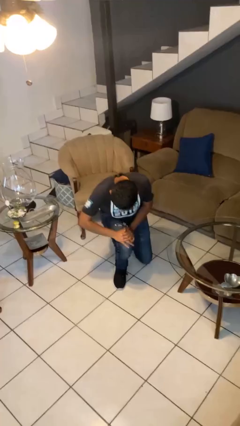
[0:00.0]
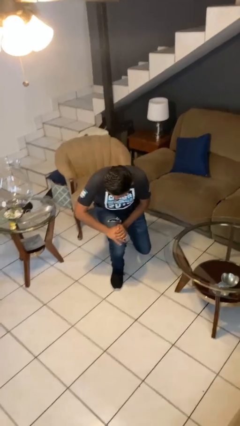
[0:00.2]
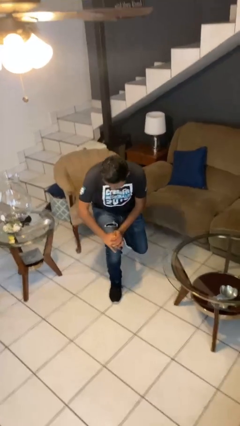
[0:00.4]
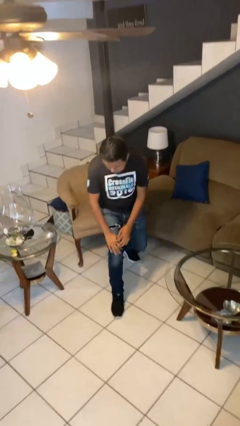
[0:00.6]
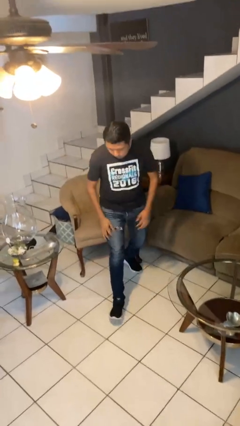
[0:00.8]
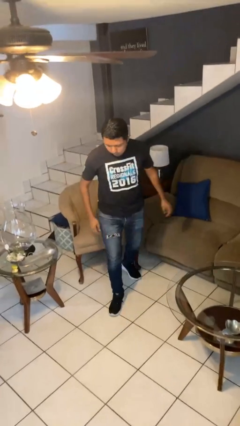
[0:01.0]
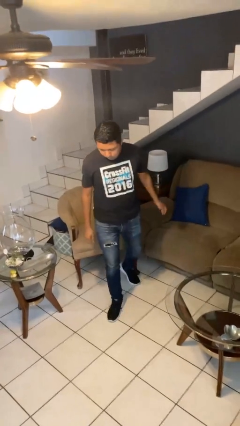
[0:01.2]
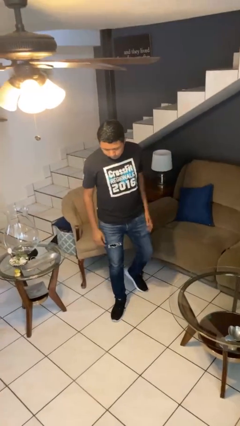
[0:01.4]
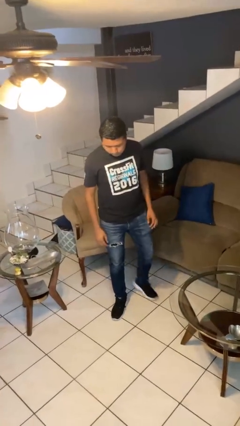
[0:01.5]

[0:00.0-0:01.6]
person stands up from floor

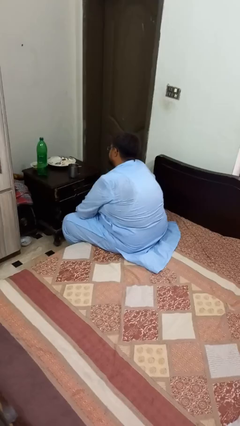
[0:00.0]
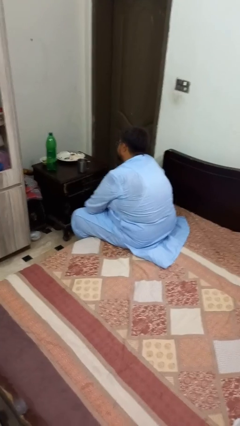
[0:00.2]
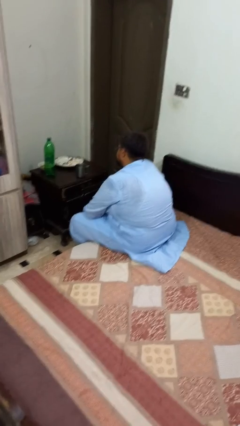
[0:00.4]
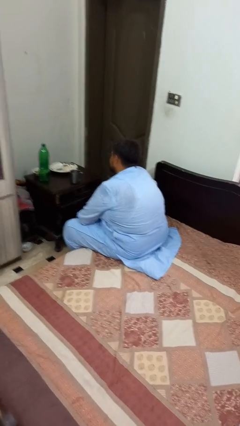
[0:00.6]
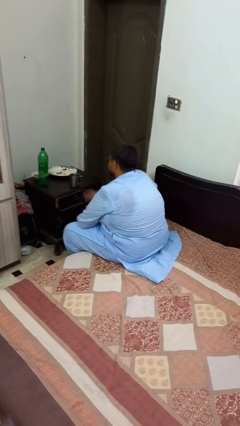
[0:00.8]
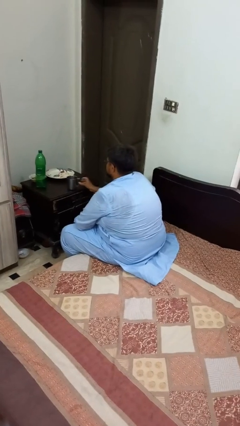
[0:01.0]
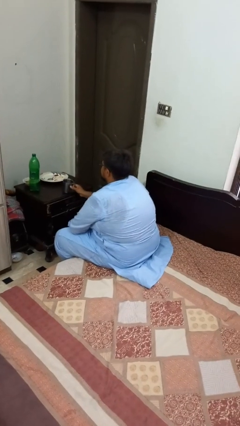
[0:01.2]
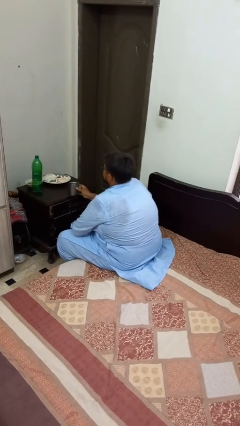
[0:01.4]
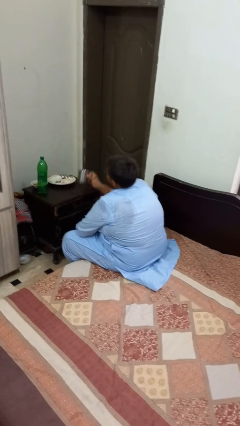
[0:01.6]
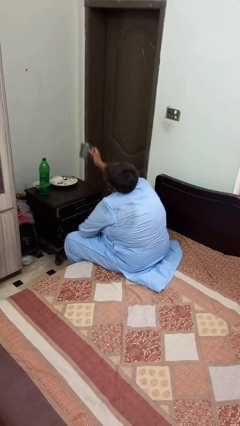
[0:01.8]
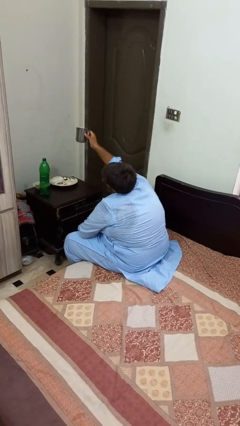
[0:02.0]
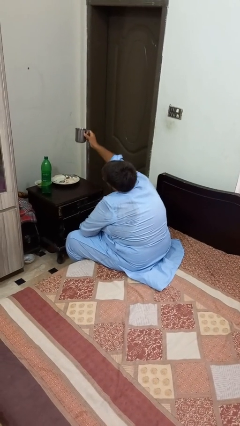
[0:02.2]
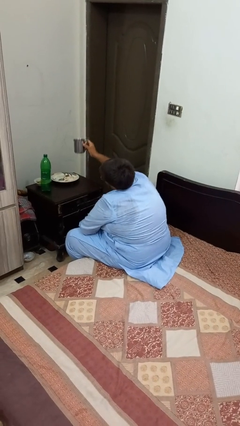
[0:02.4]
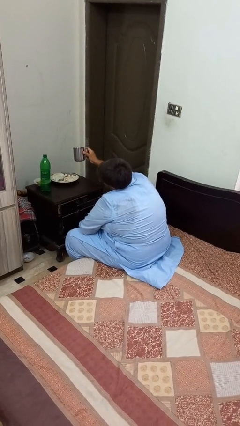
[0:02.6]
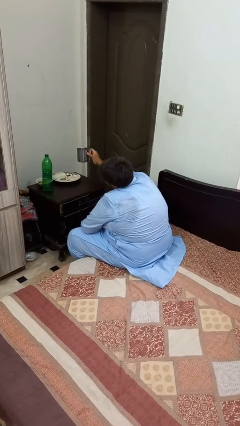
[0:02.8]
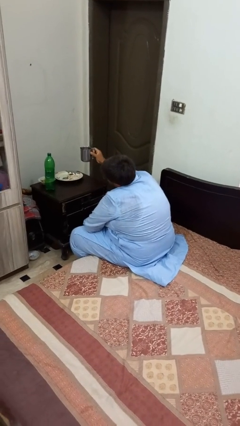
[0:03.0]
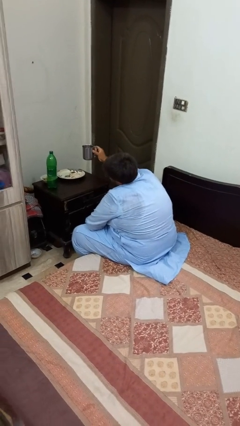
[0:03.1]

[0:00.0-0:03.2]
person picks up object from table

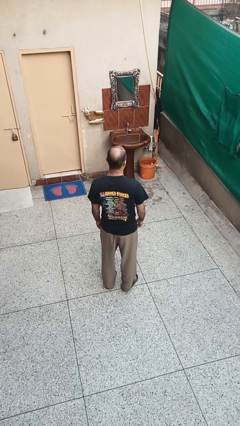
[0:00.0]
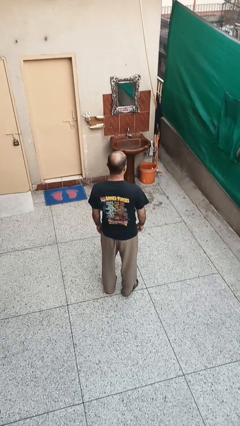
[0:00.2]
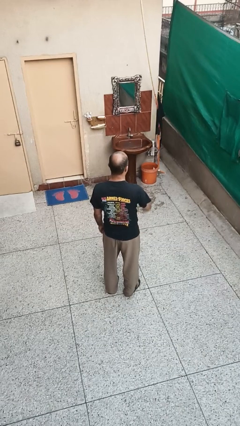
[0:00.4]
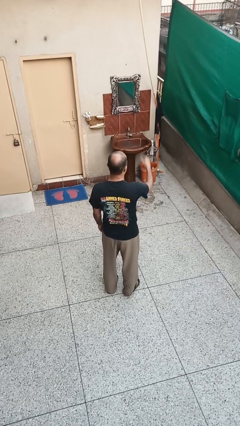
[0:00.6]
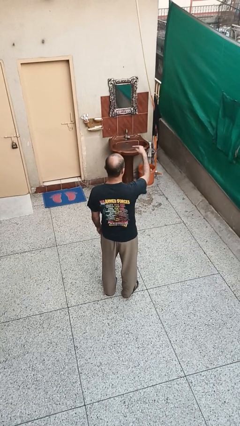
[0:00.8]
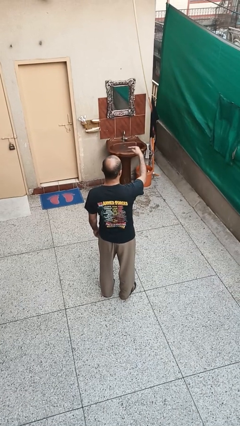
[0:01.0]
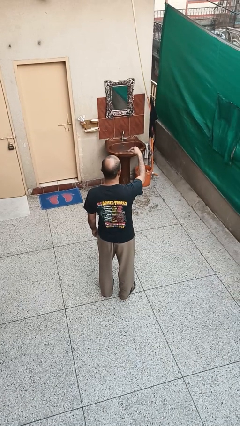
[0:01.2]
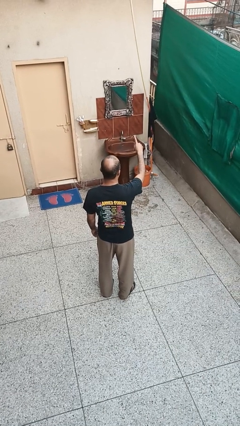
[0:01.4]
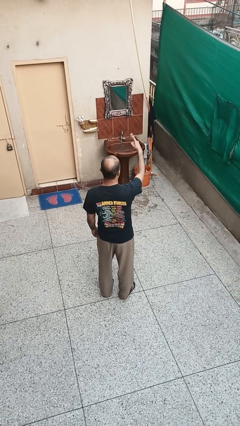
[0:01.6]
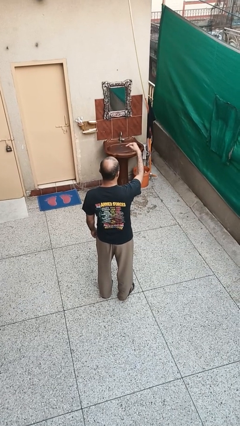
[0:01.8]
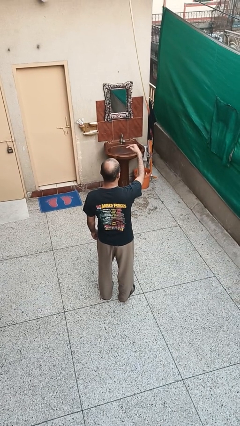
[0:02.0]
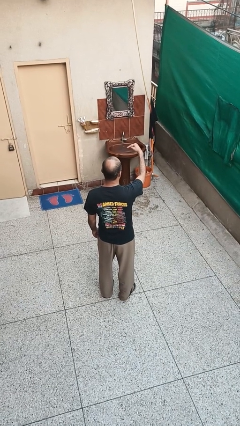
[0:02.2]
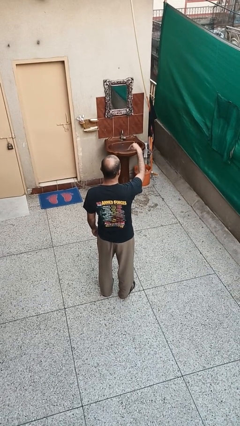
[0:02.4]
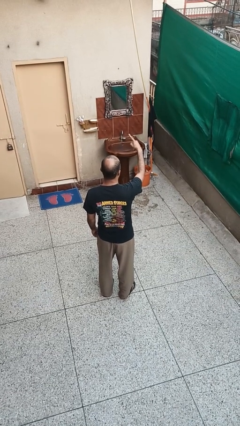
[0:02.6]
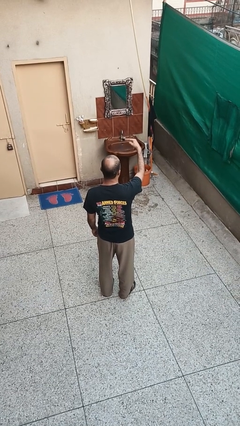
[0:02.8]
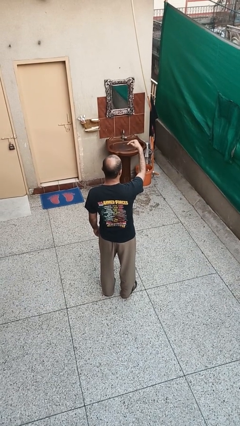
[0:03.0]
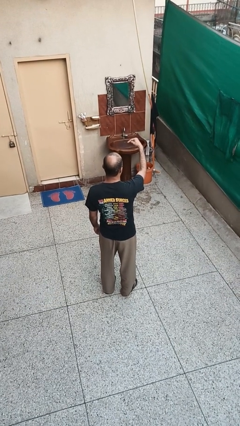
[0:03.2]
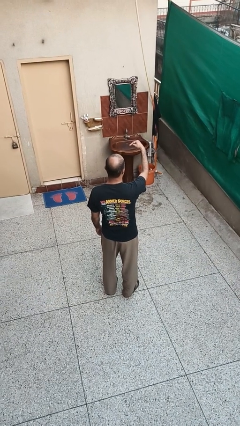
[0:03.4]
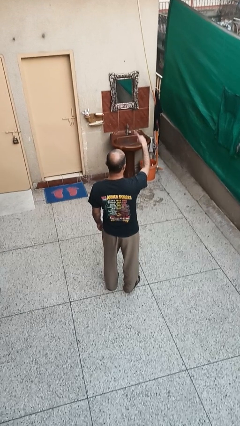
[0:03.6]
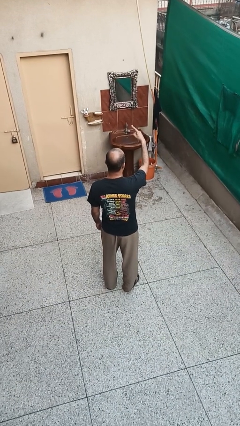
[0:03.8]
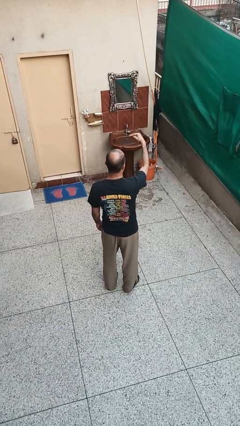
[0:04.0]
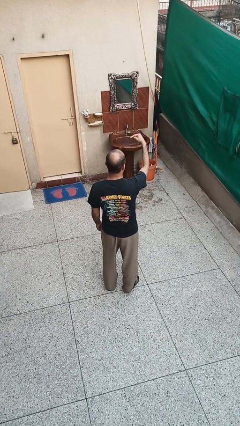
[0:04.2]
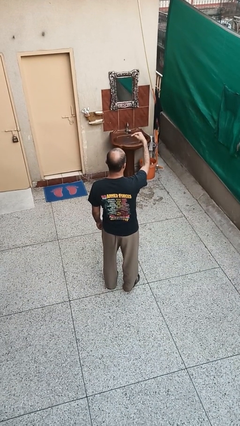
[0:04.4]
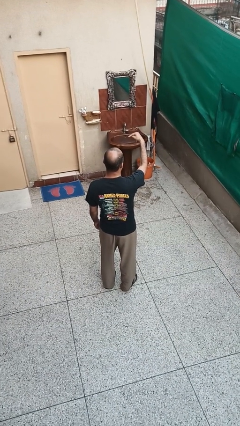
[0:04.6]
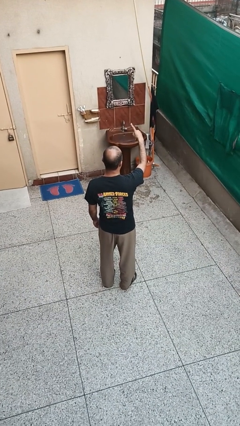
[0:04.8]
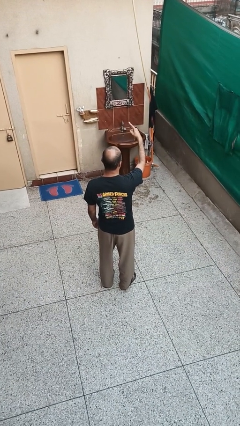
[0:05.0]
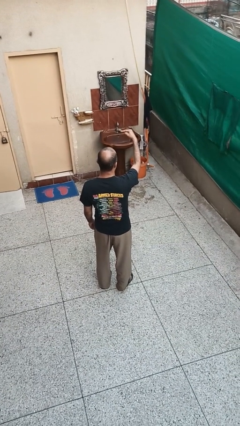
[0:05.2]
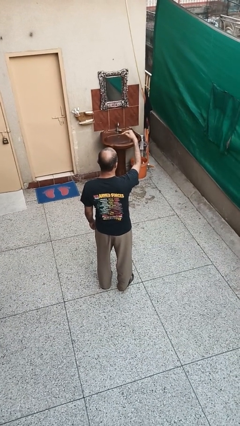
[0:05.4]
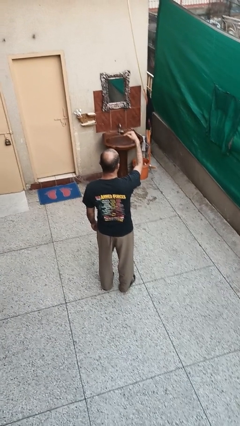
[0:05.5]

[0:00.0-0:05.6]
person gestures swipe up

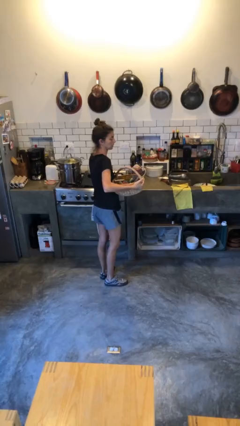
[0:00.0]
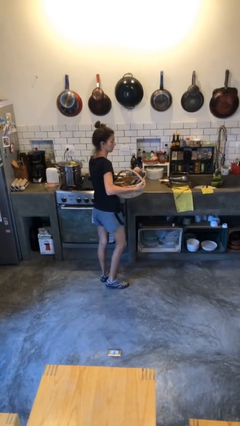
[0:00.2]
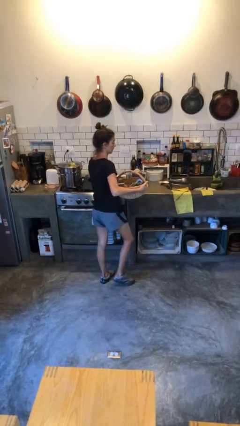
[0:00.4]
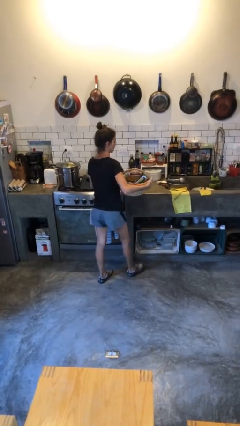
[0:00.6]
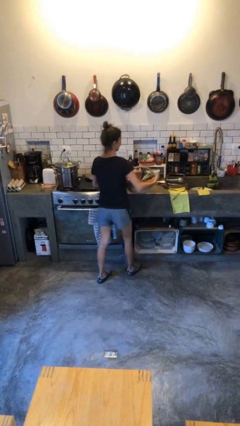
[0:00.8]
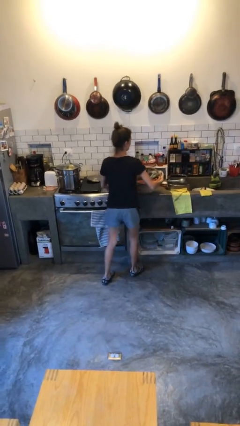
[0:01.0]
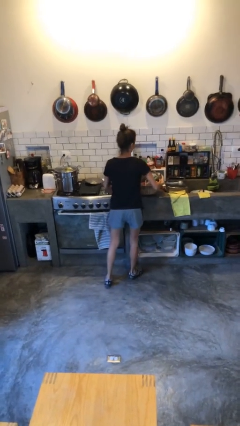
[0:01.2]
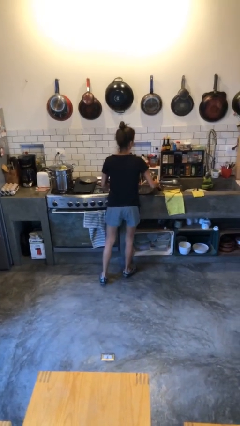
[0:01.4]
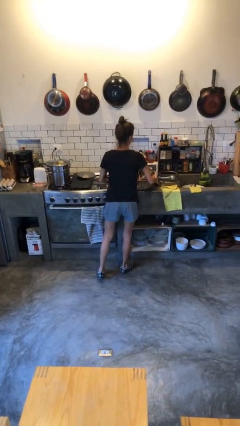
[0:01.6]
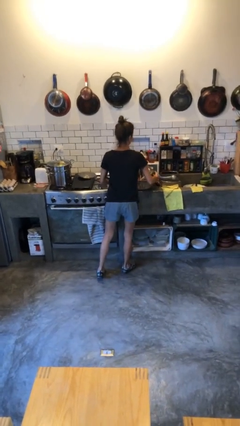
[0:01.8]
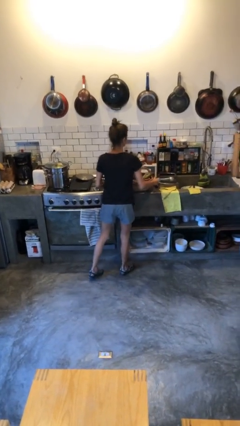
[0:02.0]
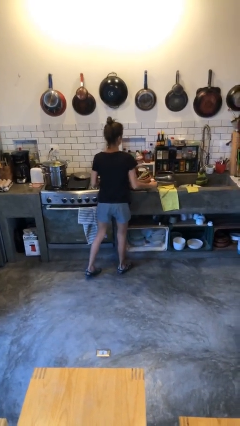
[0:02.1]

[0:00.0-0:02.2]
person puts down object on countertop

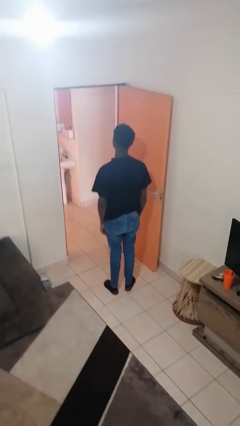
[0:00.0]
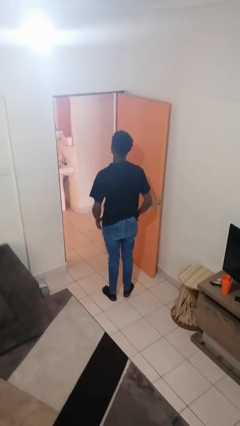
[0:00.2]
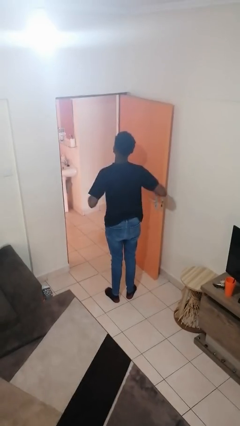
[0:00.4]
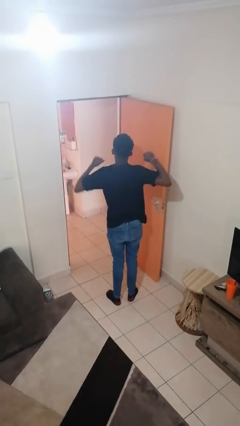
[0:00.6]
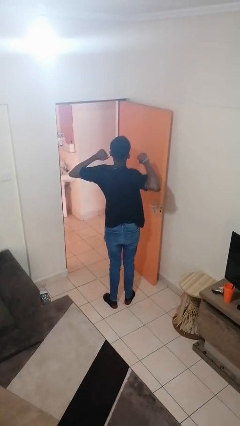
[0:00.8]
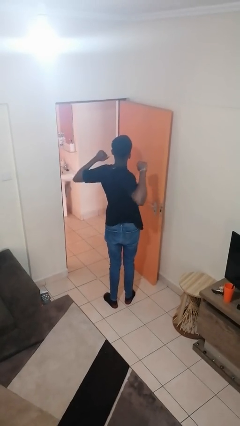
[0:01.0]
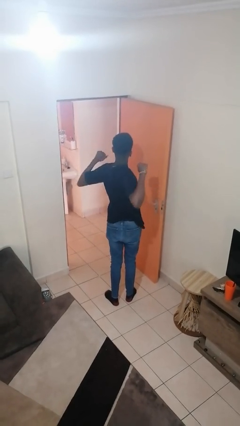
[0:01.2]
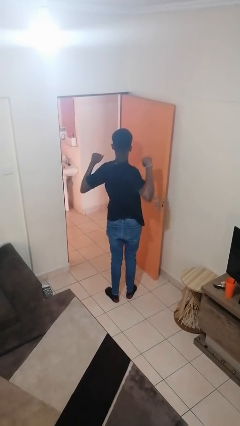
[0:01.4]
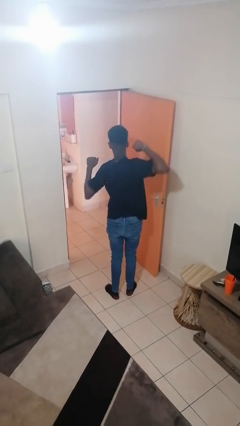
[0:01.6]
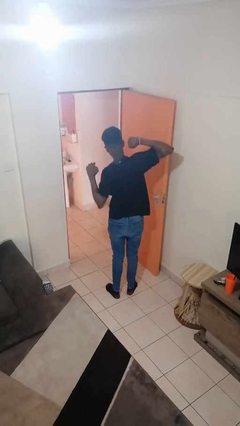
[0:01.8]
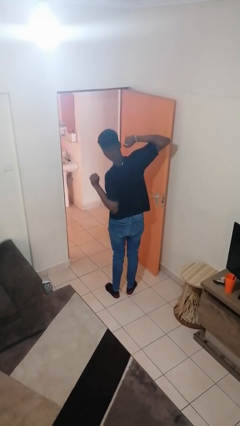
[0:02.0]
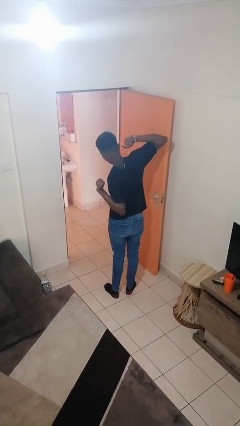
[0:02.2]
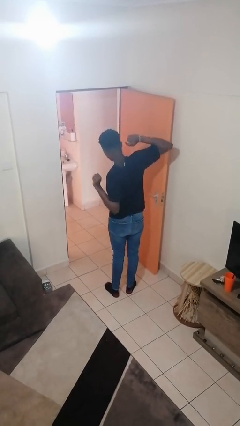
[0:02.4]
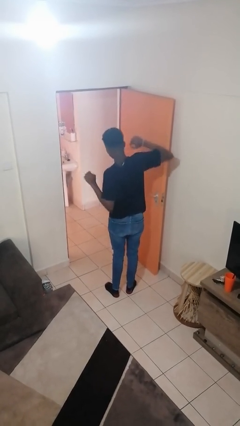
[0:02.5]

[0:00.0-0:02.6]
person stretches arms to side

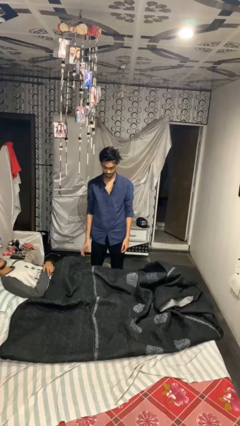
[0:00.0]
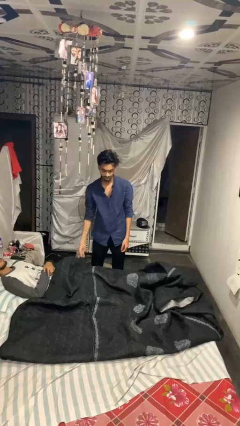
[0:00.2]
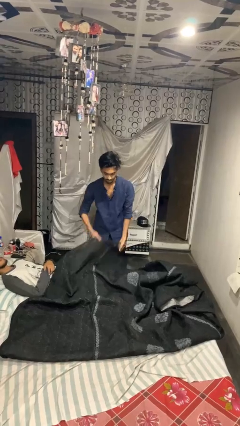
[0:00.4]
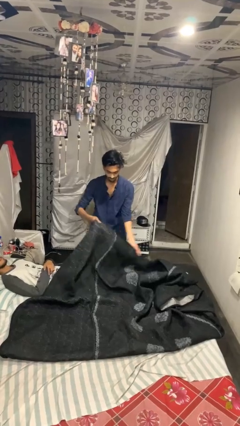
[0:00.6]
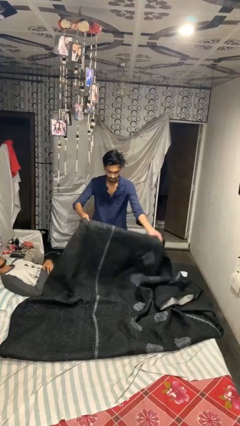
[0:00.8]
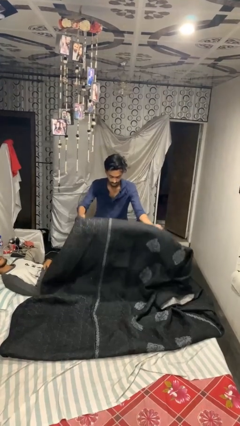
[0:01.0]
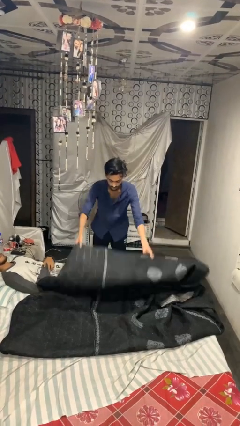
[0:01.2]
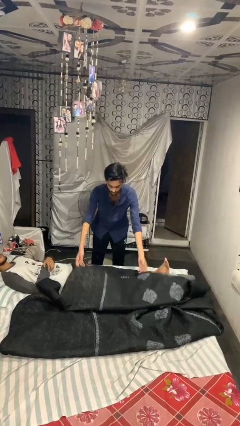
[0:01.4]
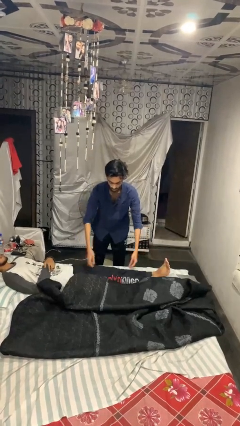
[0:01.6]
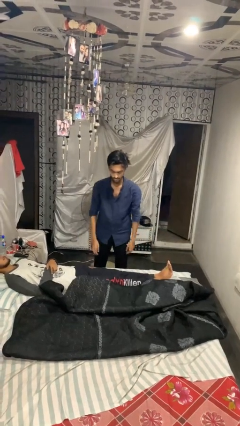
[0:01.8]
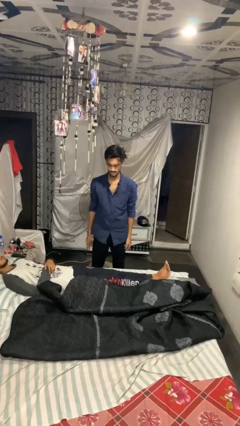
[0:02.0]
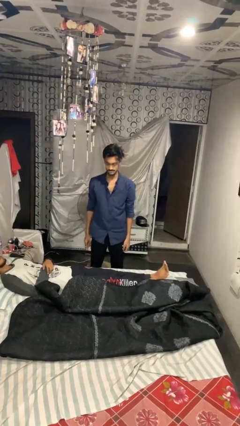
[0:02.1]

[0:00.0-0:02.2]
person uncovers friend with blanket
